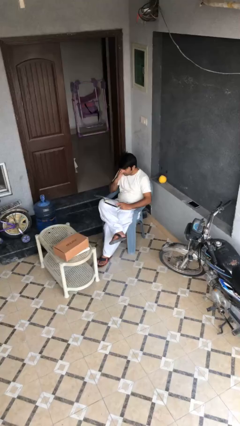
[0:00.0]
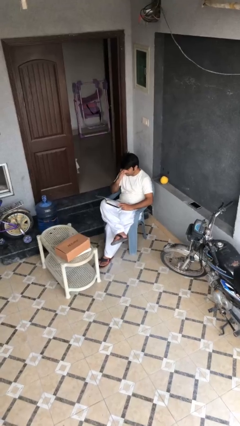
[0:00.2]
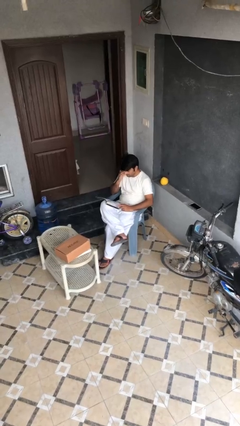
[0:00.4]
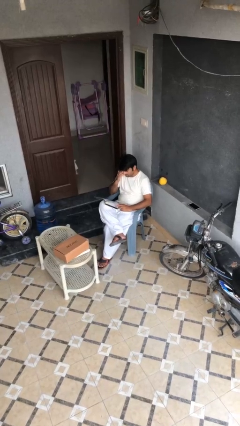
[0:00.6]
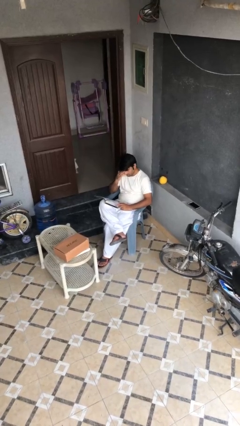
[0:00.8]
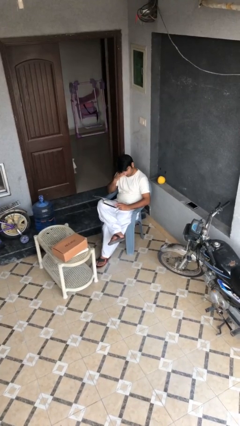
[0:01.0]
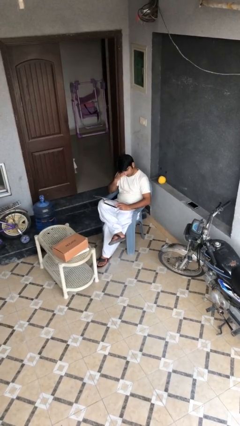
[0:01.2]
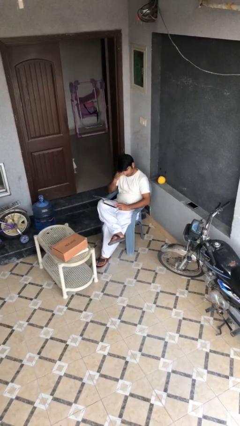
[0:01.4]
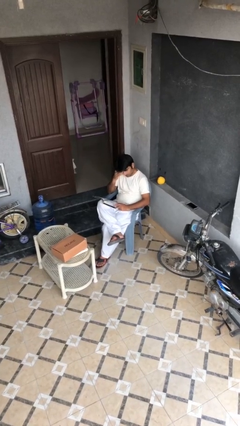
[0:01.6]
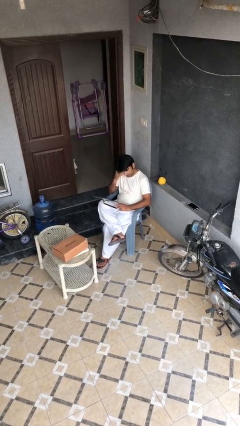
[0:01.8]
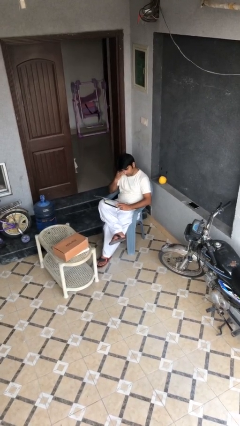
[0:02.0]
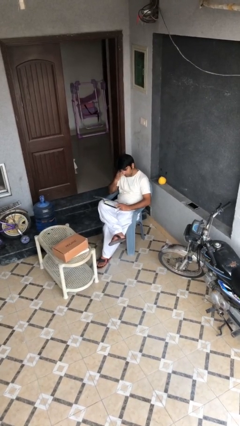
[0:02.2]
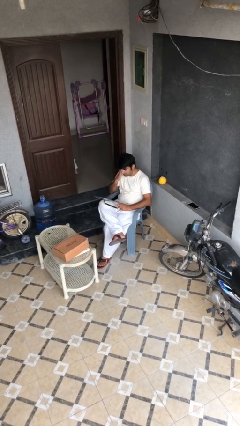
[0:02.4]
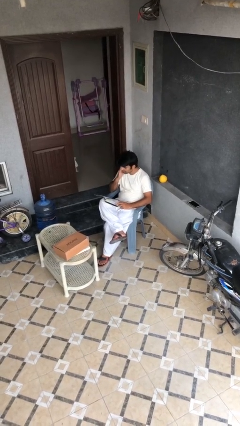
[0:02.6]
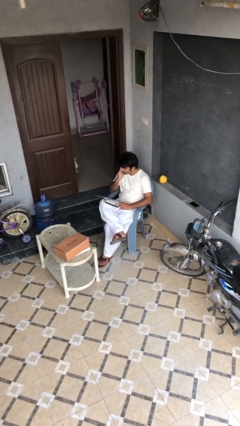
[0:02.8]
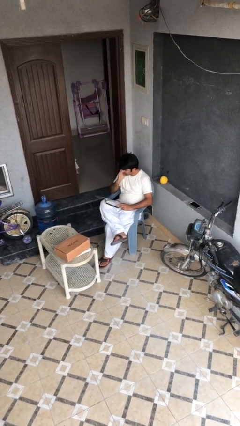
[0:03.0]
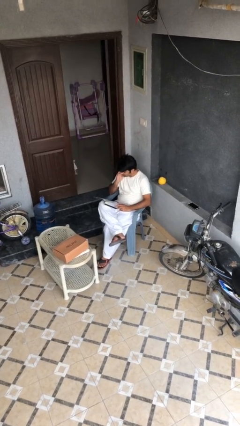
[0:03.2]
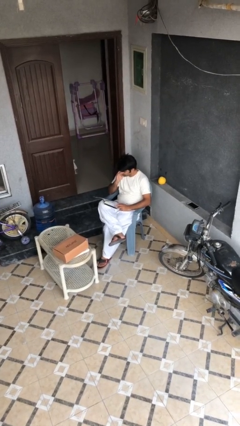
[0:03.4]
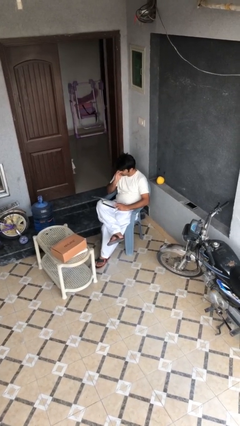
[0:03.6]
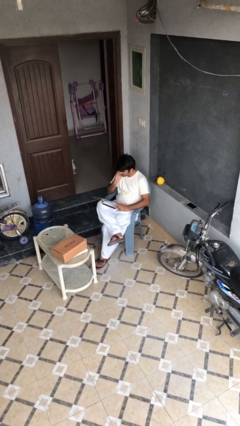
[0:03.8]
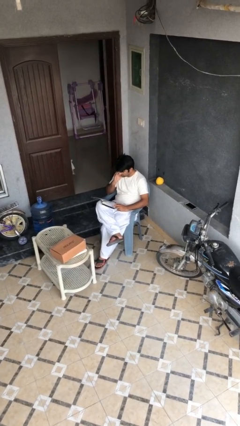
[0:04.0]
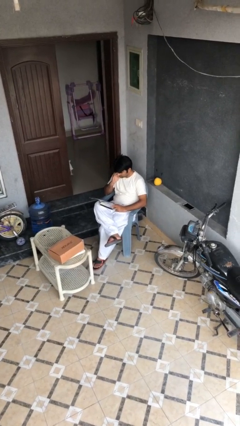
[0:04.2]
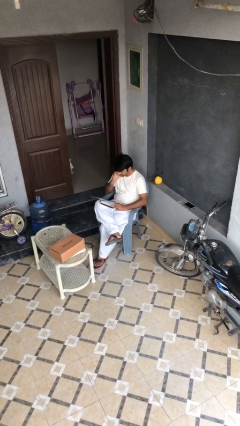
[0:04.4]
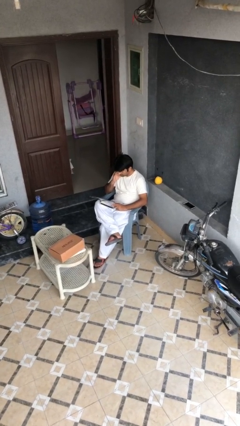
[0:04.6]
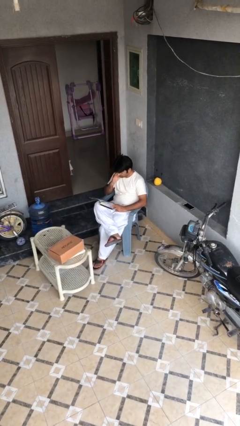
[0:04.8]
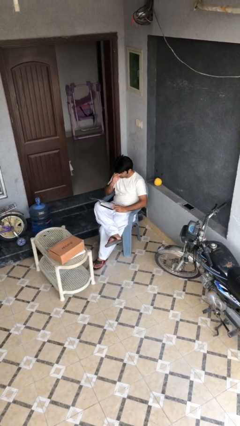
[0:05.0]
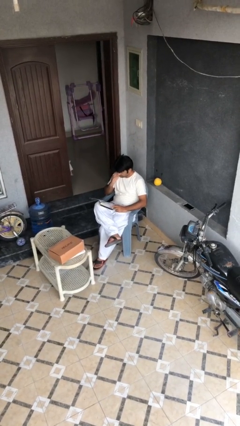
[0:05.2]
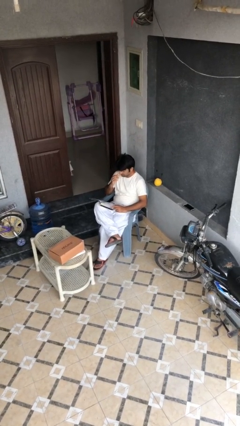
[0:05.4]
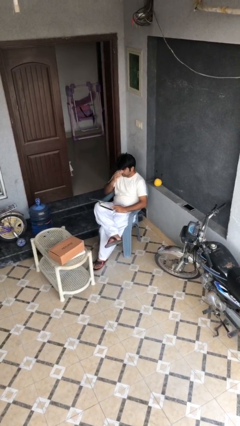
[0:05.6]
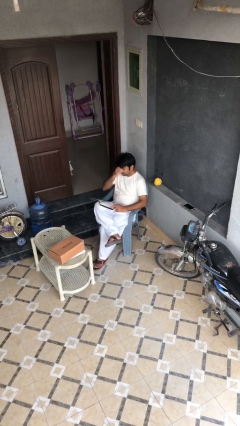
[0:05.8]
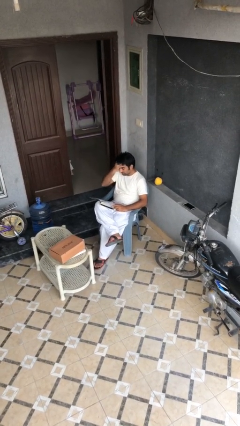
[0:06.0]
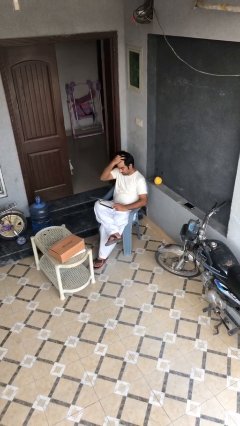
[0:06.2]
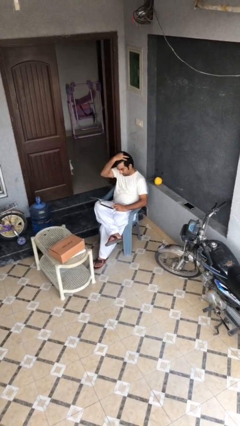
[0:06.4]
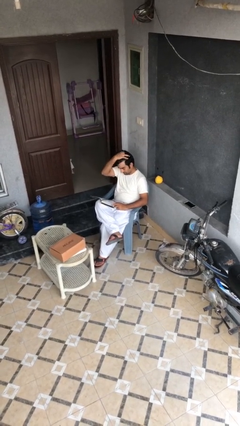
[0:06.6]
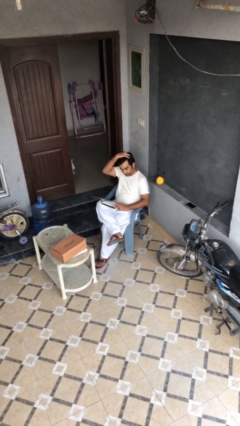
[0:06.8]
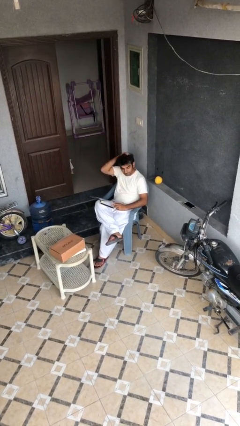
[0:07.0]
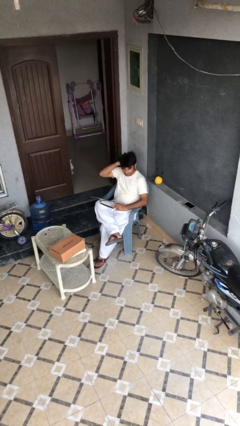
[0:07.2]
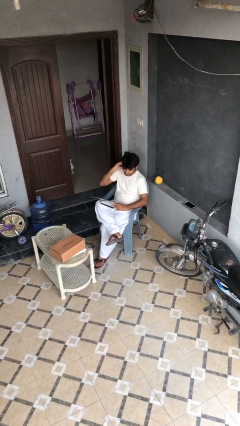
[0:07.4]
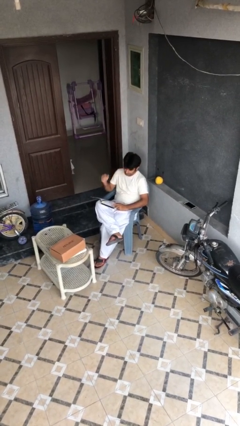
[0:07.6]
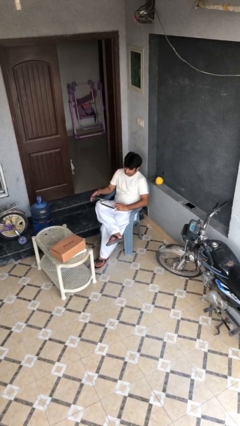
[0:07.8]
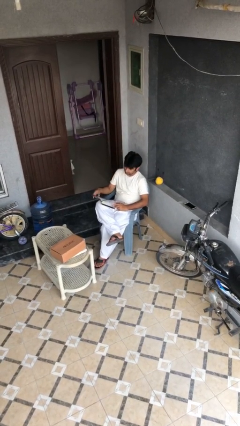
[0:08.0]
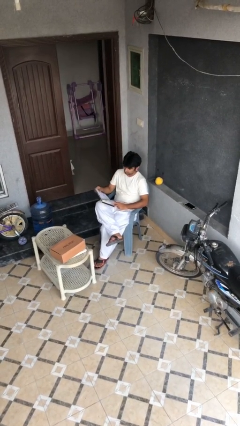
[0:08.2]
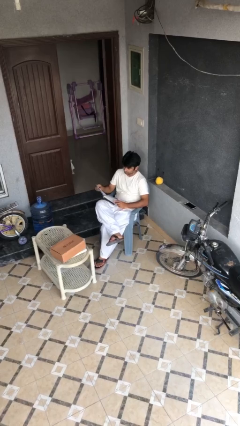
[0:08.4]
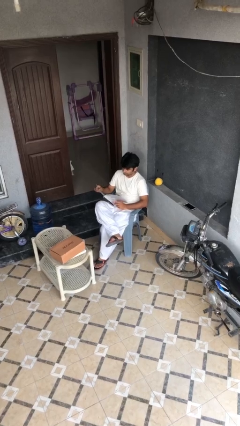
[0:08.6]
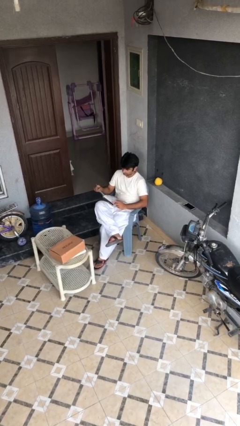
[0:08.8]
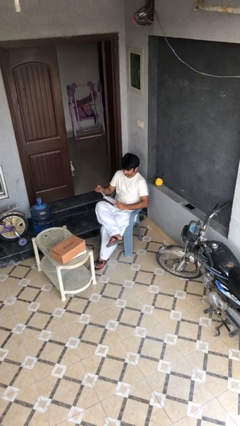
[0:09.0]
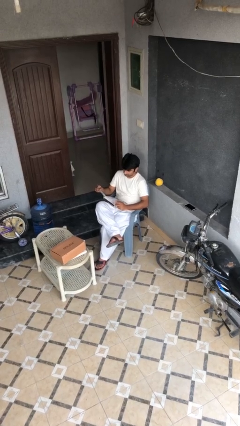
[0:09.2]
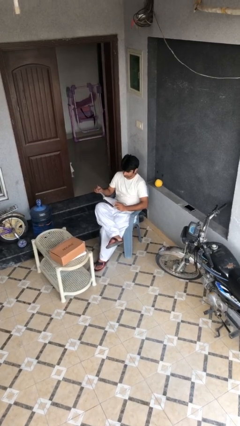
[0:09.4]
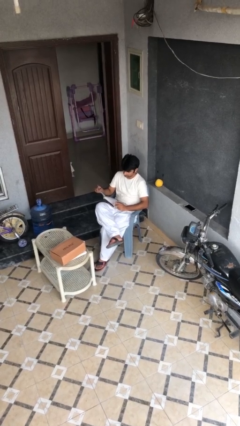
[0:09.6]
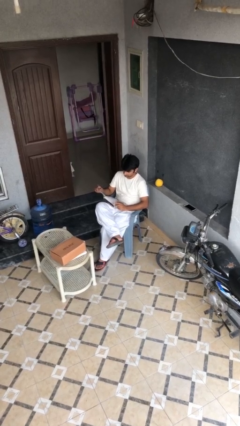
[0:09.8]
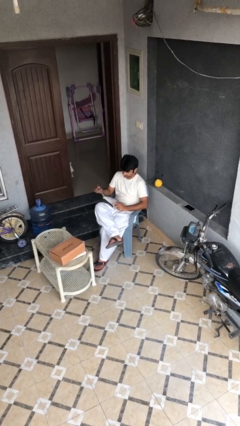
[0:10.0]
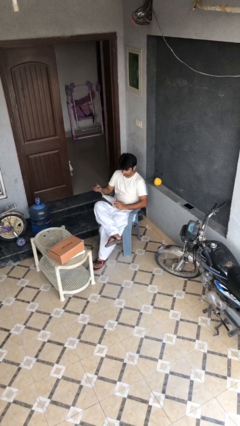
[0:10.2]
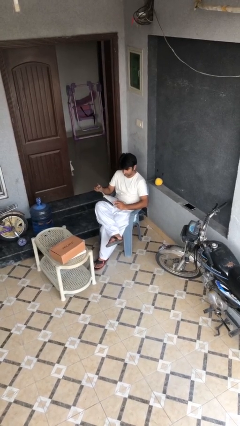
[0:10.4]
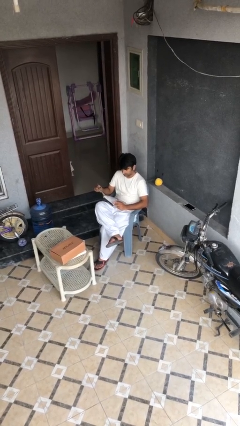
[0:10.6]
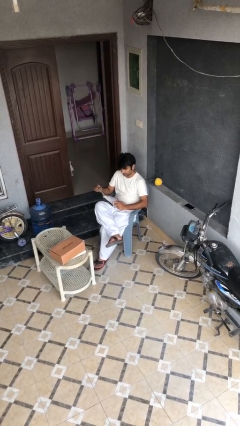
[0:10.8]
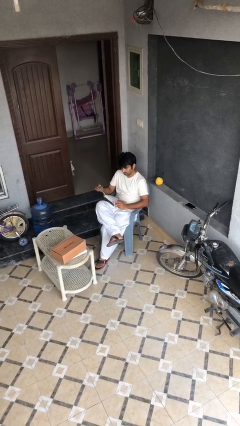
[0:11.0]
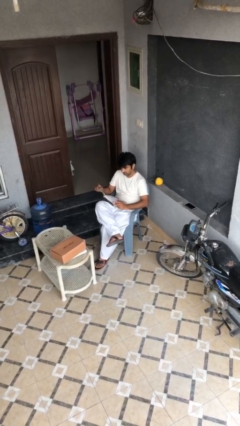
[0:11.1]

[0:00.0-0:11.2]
person reads document

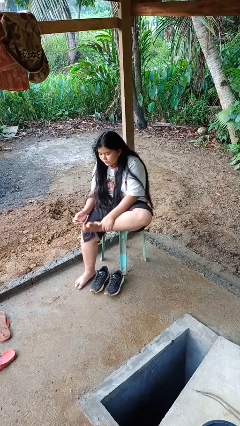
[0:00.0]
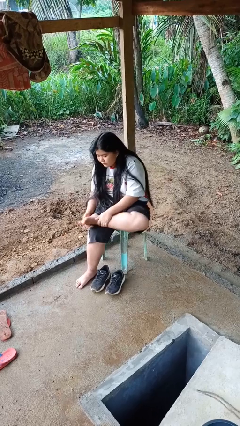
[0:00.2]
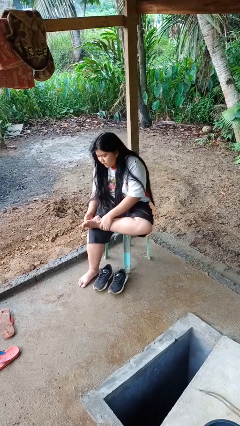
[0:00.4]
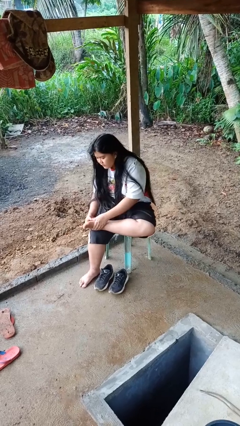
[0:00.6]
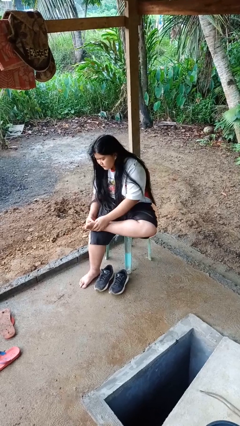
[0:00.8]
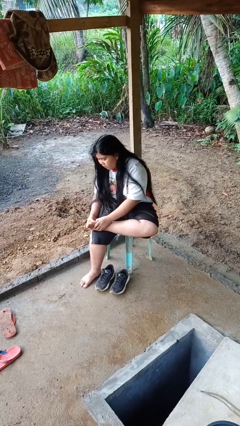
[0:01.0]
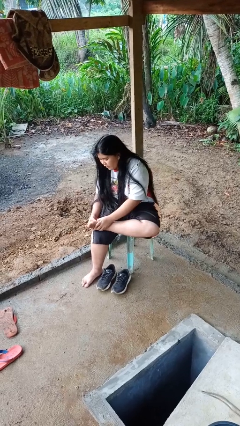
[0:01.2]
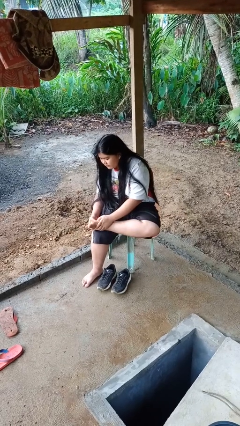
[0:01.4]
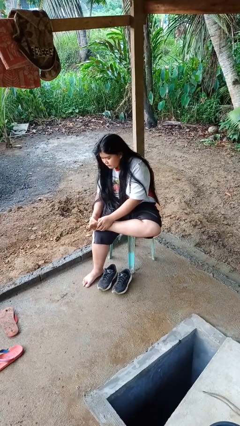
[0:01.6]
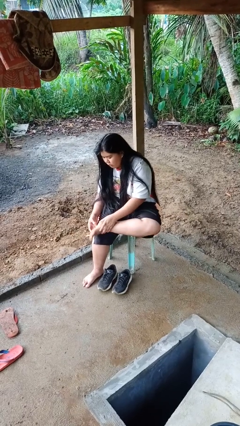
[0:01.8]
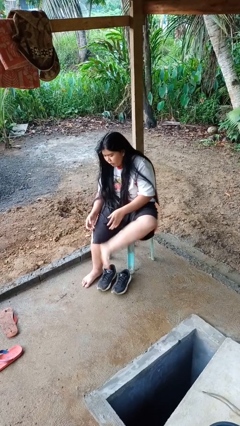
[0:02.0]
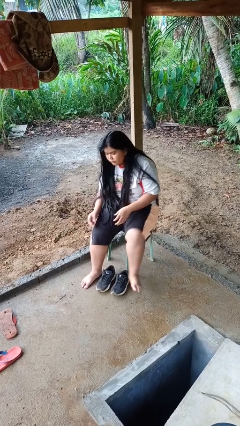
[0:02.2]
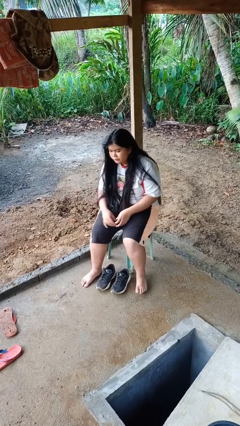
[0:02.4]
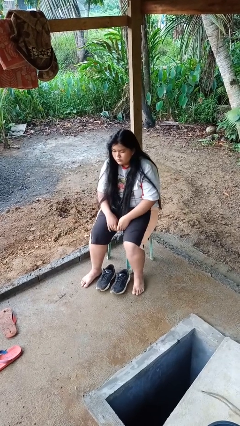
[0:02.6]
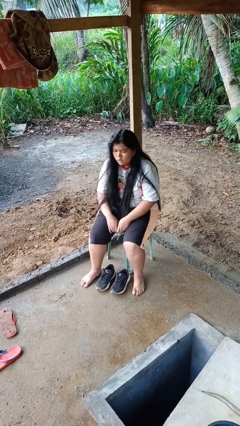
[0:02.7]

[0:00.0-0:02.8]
person rubs foot

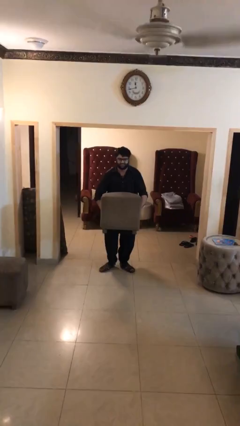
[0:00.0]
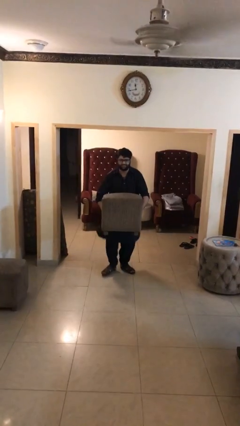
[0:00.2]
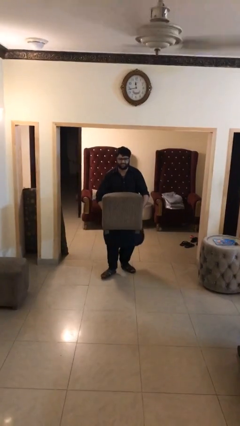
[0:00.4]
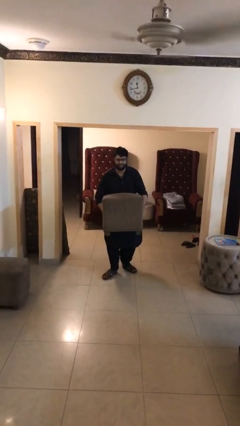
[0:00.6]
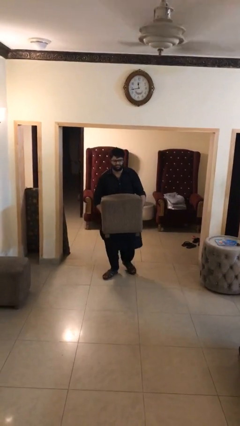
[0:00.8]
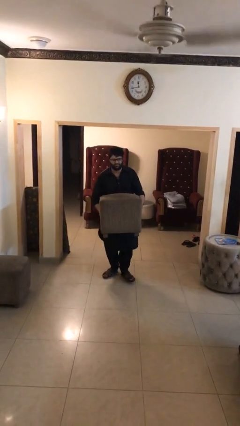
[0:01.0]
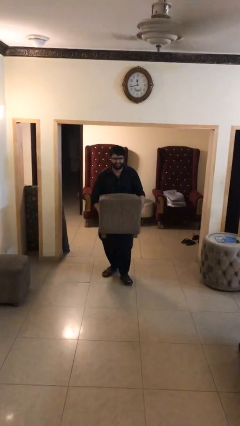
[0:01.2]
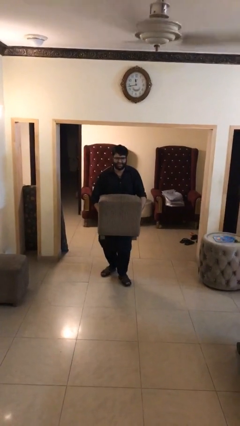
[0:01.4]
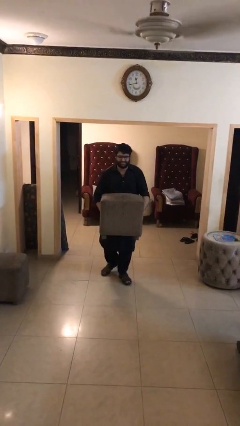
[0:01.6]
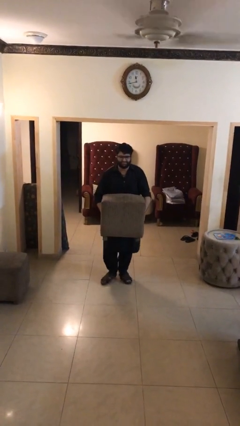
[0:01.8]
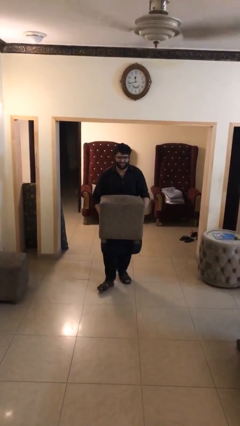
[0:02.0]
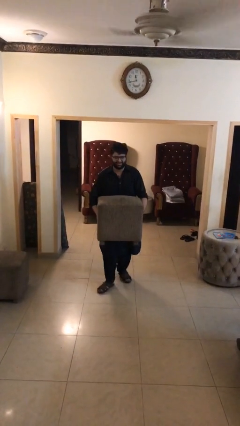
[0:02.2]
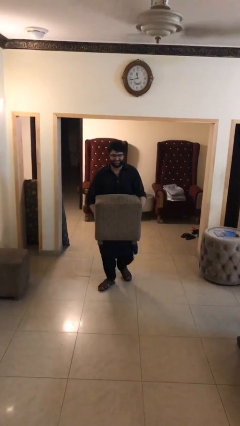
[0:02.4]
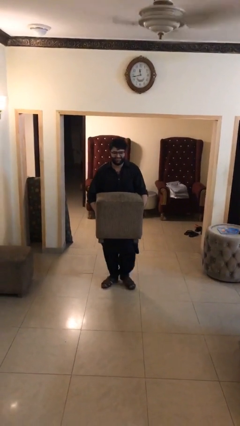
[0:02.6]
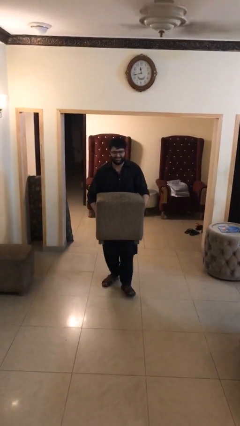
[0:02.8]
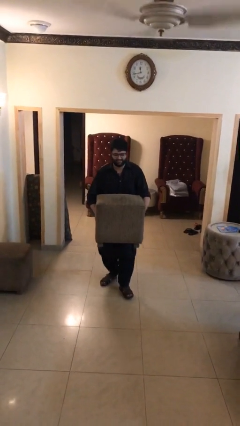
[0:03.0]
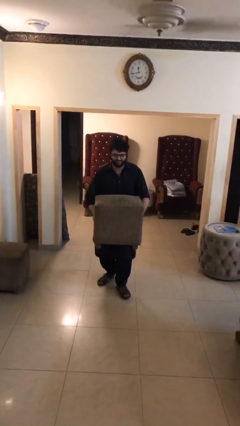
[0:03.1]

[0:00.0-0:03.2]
person carries heavy object

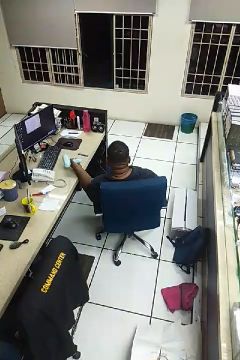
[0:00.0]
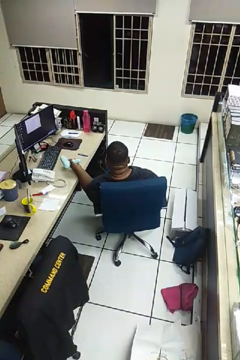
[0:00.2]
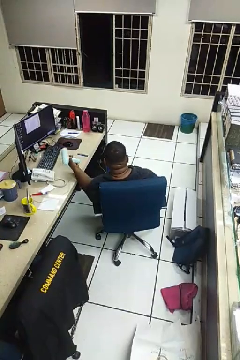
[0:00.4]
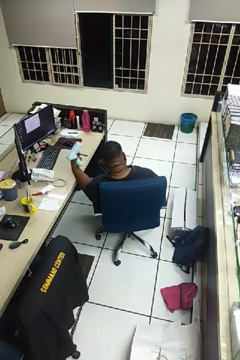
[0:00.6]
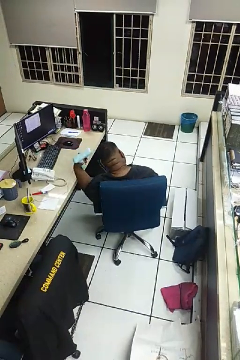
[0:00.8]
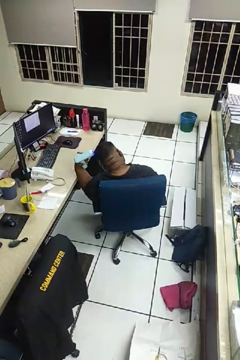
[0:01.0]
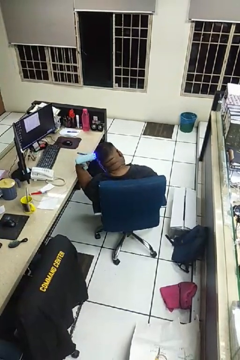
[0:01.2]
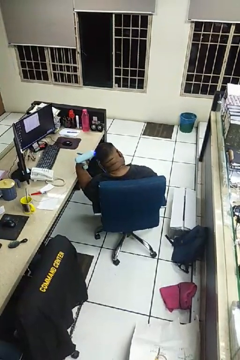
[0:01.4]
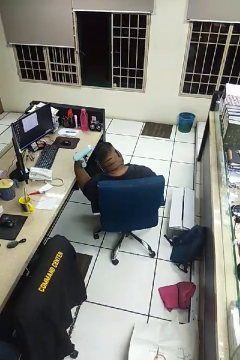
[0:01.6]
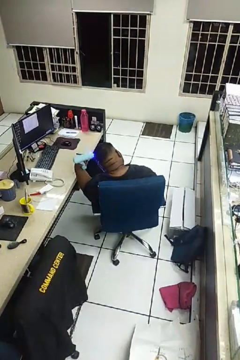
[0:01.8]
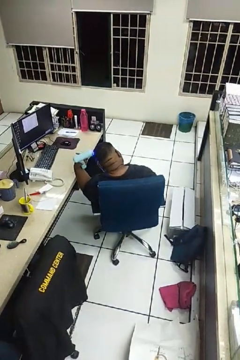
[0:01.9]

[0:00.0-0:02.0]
person dries hair with hairdryer
